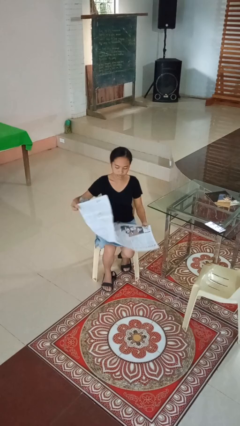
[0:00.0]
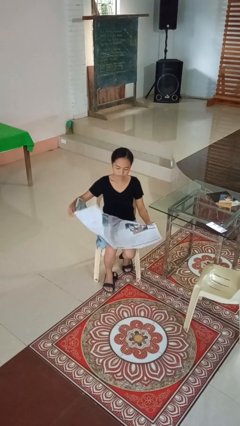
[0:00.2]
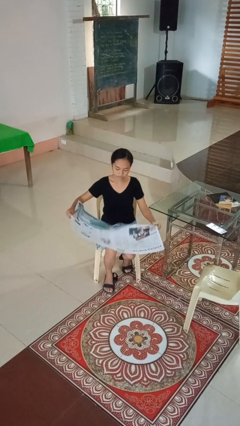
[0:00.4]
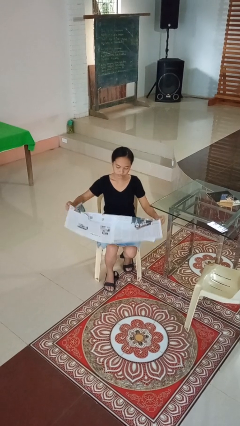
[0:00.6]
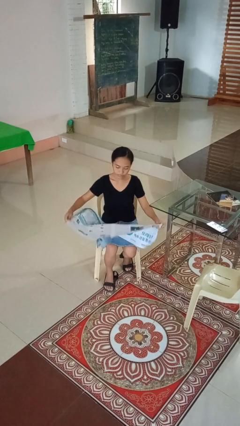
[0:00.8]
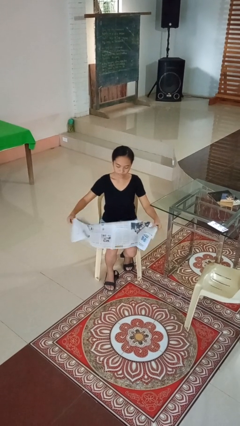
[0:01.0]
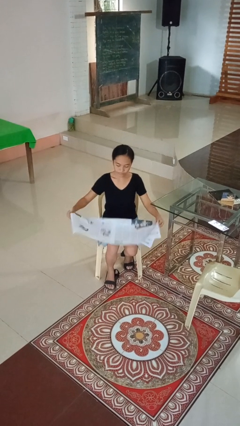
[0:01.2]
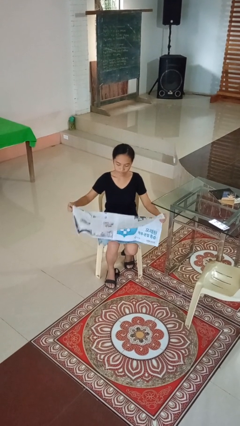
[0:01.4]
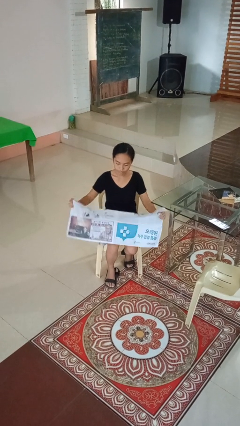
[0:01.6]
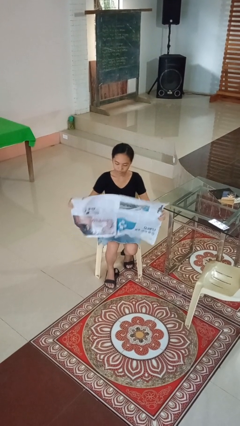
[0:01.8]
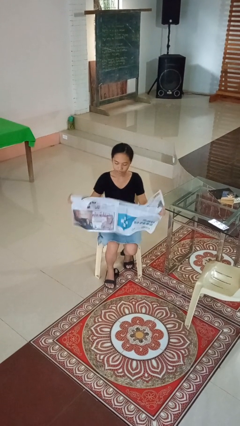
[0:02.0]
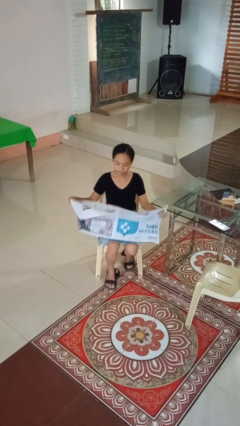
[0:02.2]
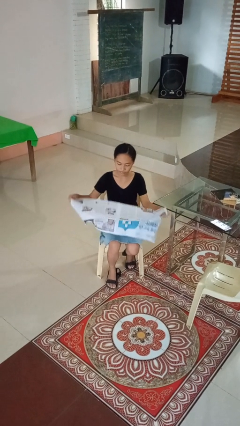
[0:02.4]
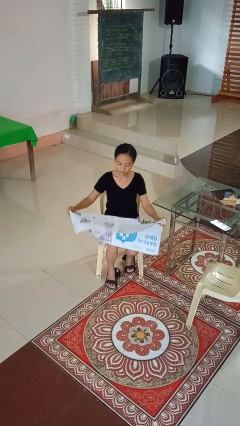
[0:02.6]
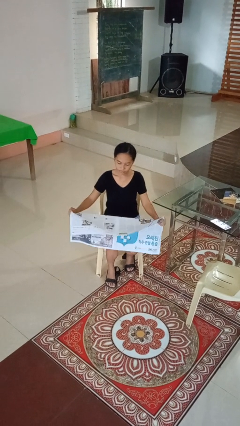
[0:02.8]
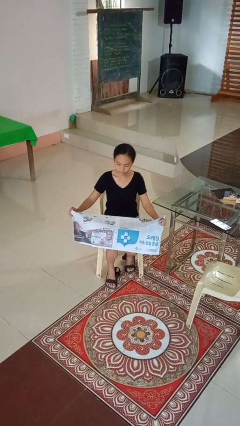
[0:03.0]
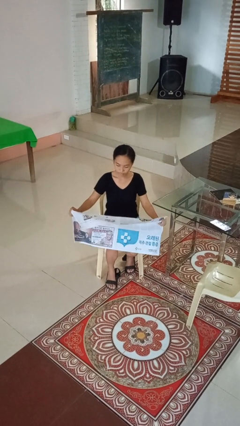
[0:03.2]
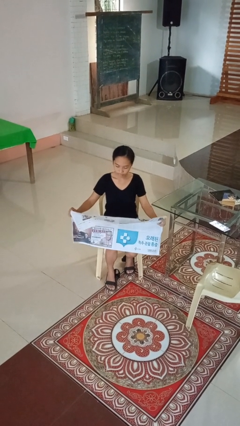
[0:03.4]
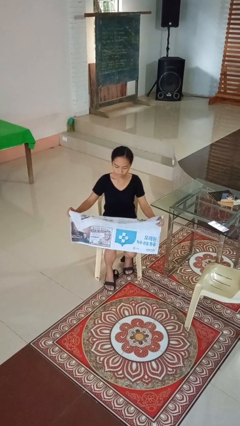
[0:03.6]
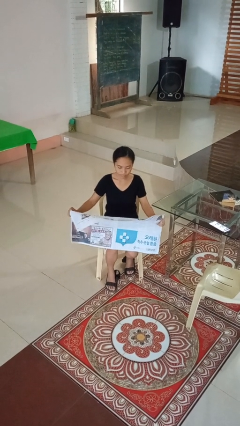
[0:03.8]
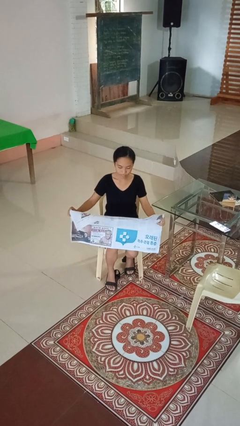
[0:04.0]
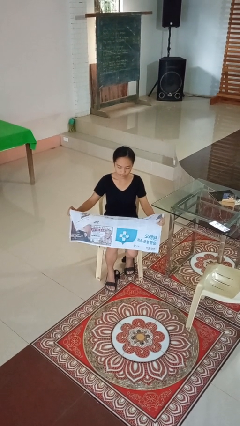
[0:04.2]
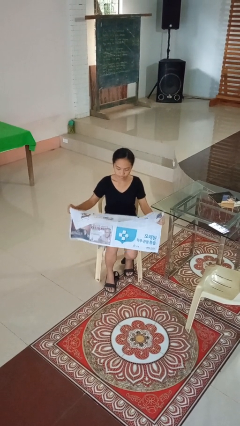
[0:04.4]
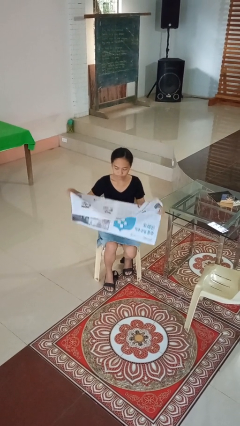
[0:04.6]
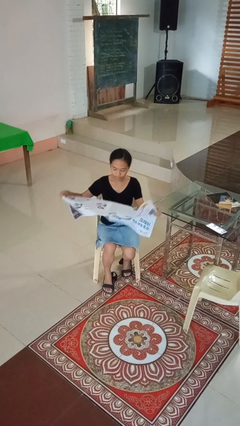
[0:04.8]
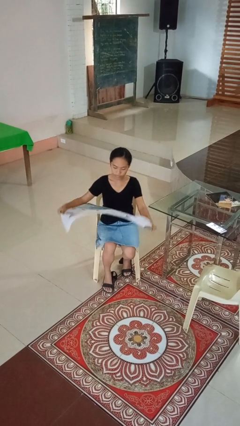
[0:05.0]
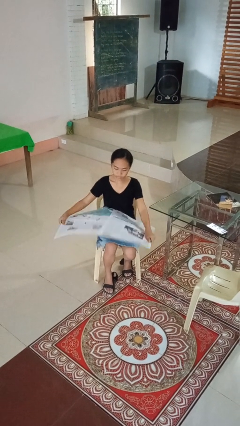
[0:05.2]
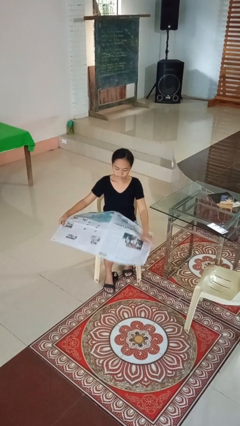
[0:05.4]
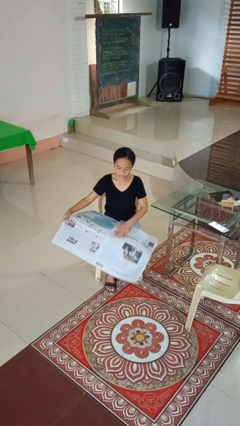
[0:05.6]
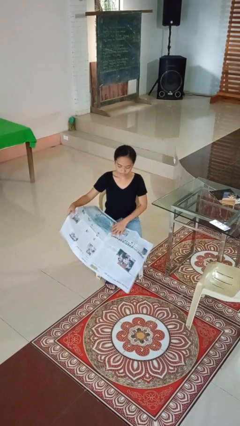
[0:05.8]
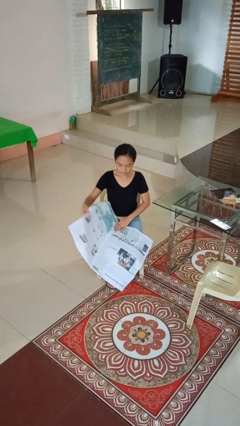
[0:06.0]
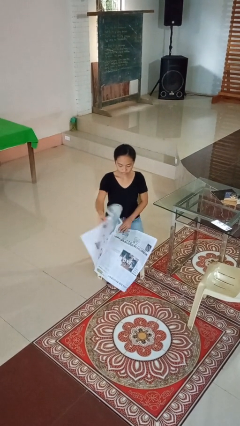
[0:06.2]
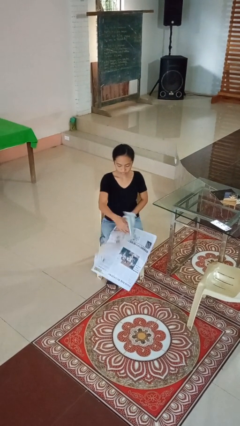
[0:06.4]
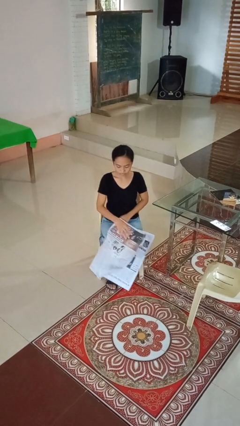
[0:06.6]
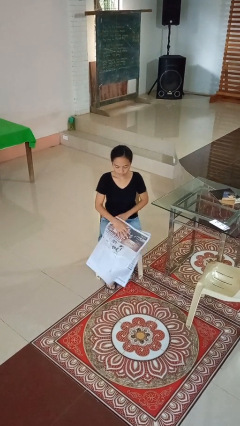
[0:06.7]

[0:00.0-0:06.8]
person reads newspaper

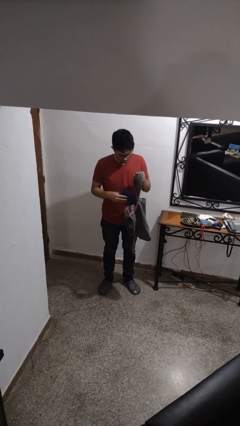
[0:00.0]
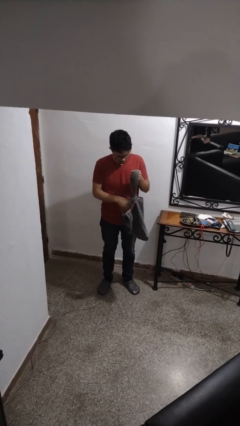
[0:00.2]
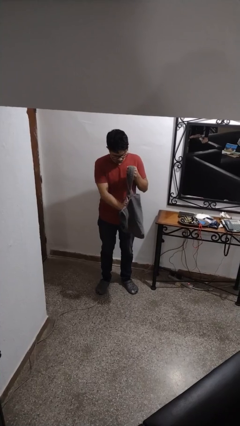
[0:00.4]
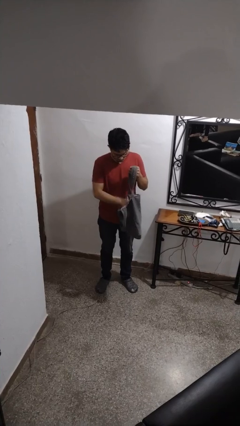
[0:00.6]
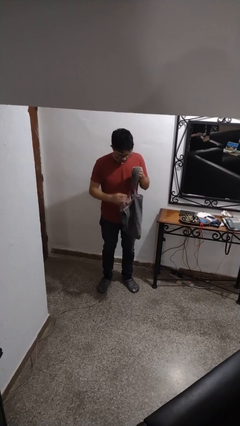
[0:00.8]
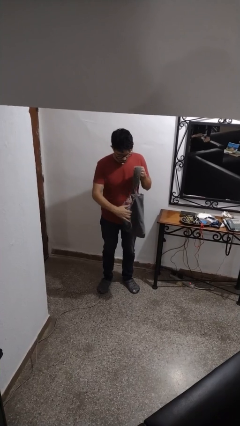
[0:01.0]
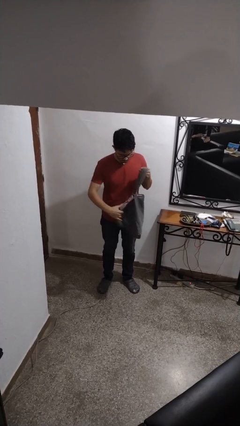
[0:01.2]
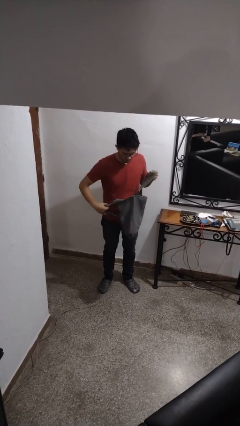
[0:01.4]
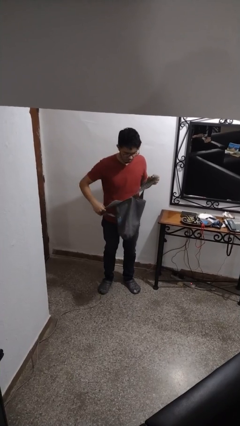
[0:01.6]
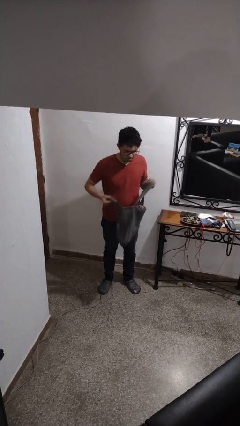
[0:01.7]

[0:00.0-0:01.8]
person puts object into purse

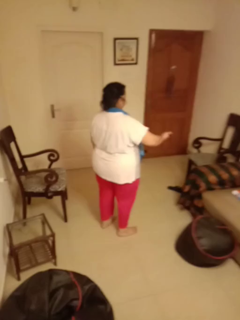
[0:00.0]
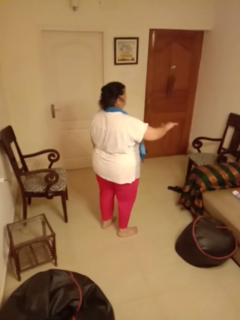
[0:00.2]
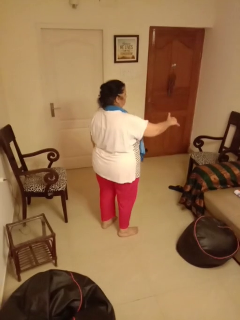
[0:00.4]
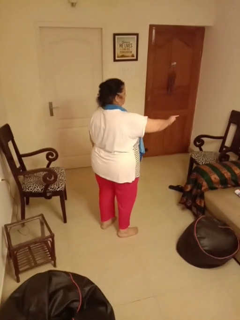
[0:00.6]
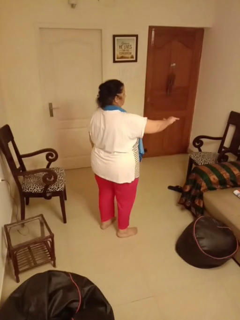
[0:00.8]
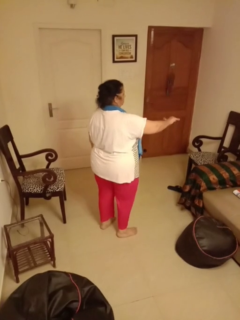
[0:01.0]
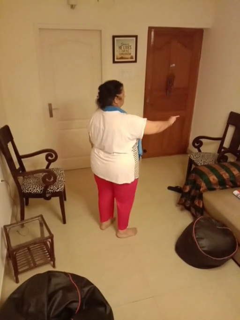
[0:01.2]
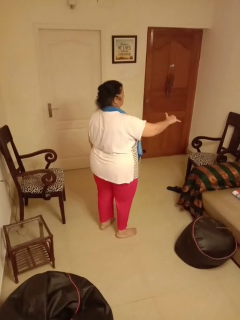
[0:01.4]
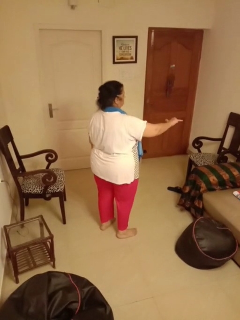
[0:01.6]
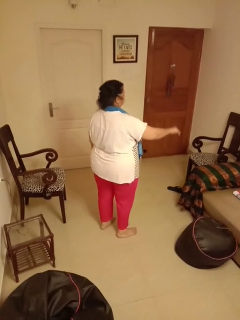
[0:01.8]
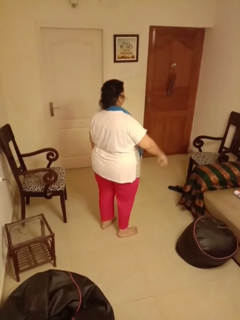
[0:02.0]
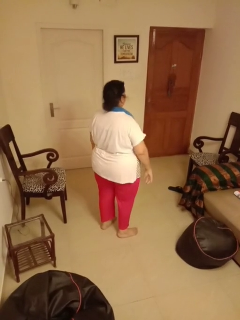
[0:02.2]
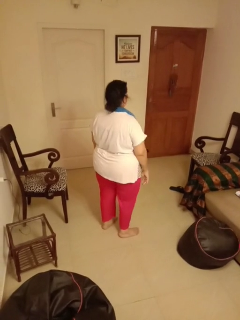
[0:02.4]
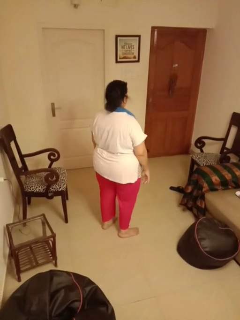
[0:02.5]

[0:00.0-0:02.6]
person gestures hang loose

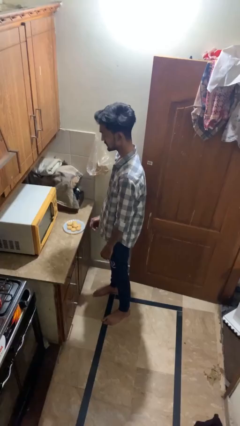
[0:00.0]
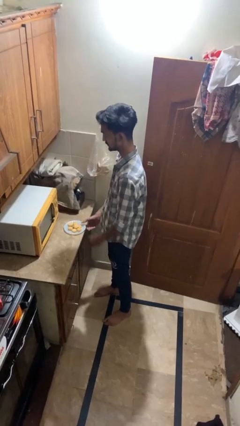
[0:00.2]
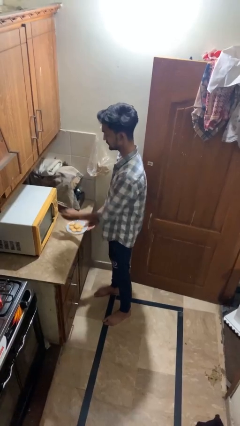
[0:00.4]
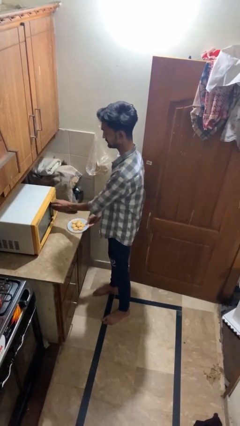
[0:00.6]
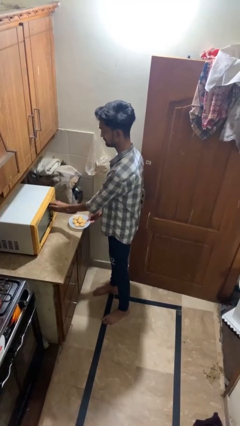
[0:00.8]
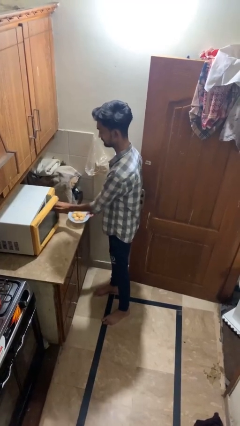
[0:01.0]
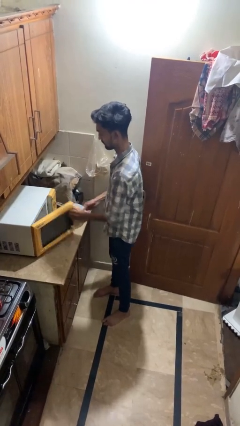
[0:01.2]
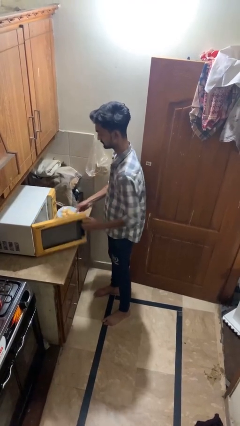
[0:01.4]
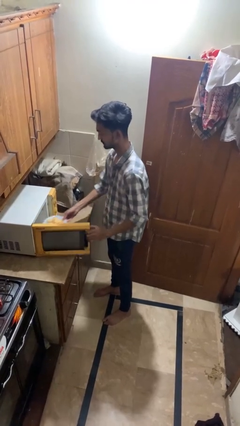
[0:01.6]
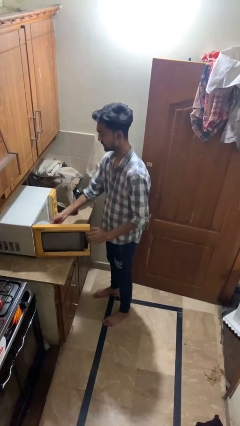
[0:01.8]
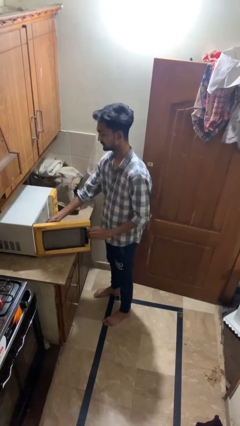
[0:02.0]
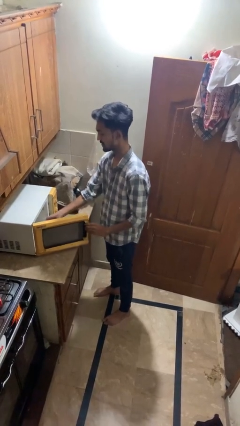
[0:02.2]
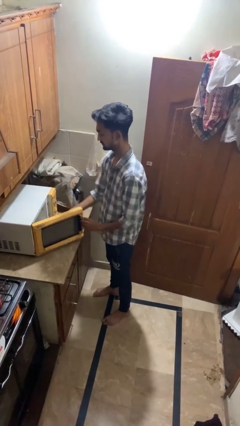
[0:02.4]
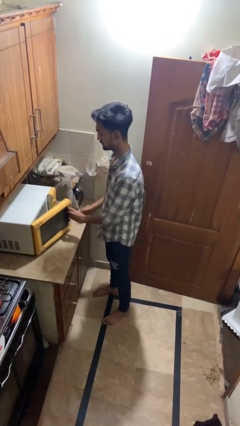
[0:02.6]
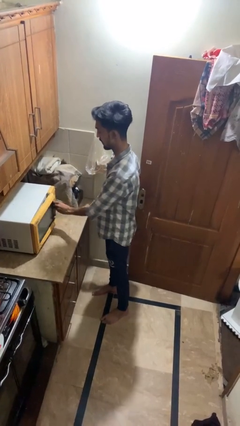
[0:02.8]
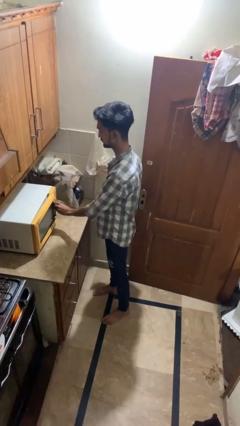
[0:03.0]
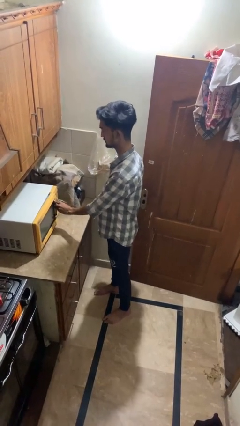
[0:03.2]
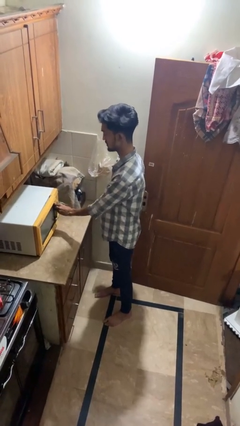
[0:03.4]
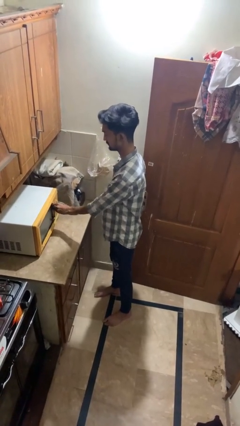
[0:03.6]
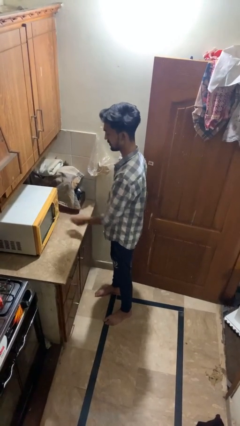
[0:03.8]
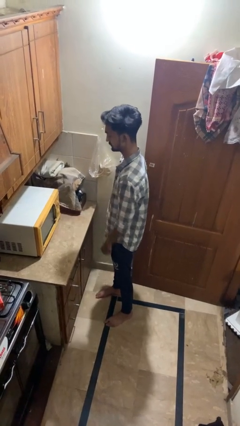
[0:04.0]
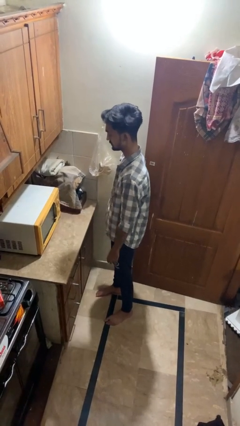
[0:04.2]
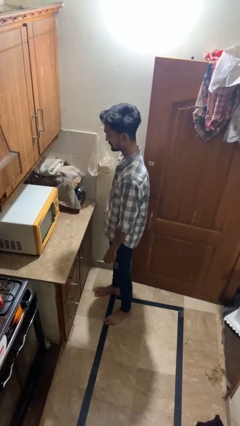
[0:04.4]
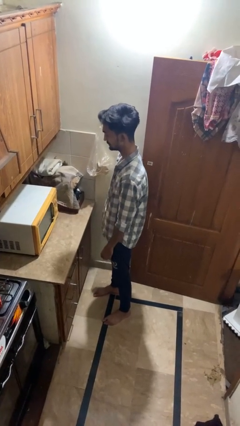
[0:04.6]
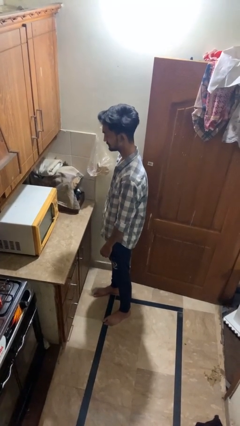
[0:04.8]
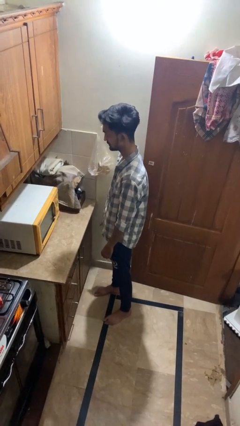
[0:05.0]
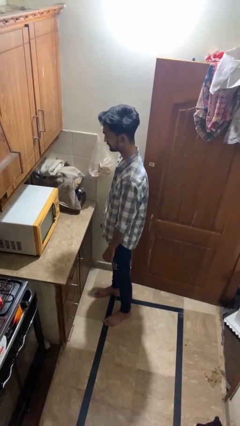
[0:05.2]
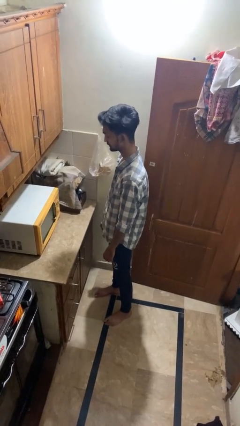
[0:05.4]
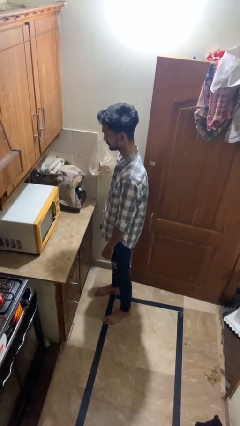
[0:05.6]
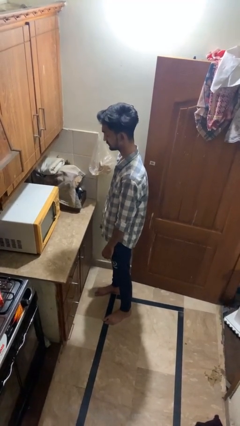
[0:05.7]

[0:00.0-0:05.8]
person puts object into microwave

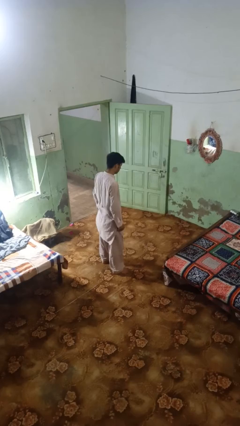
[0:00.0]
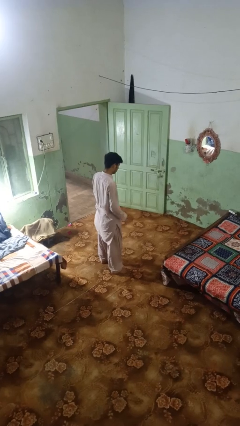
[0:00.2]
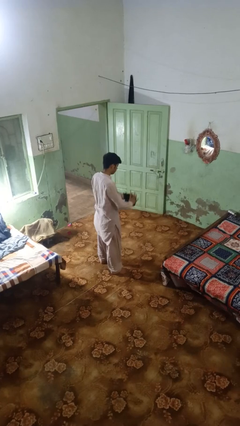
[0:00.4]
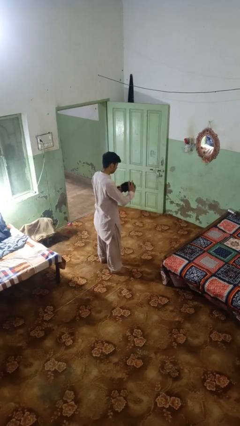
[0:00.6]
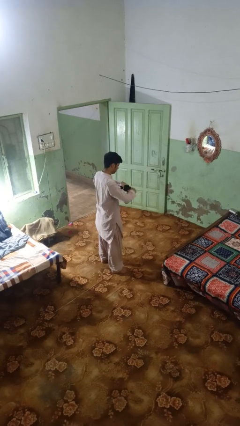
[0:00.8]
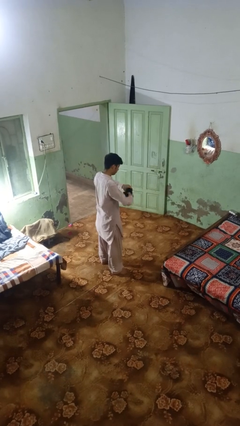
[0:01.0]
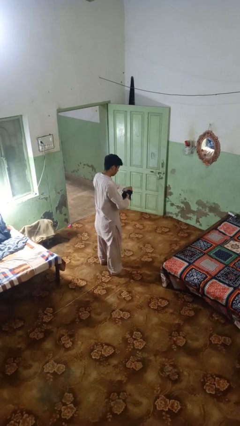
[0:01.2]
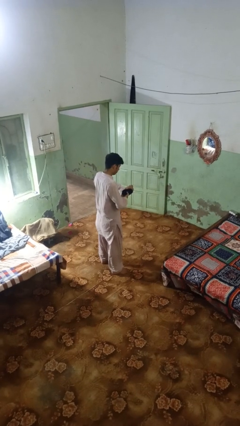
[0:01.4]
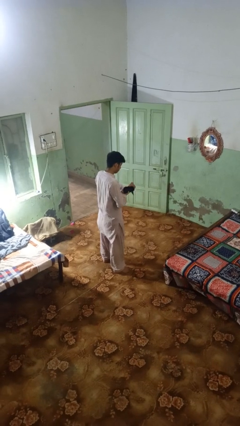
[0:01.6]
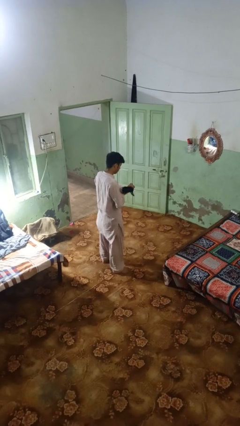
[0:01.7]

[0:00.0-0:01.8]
person squeezes object
